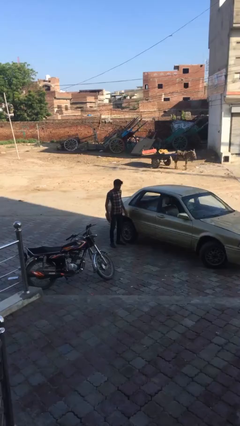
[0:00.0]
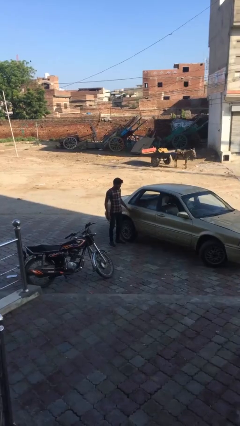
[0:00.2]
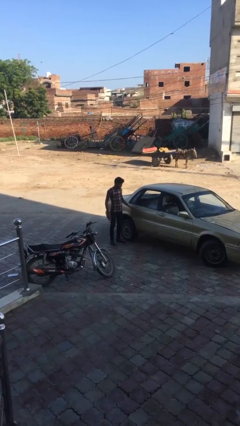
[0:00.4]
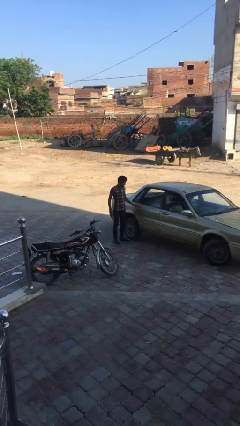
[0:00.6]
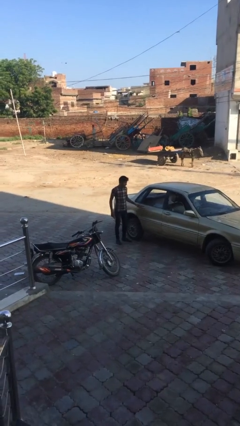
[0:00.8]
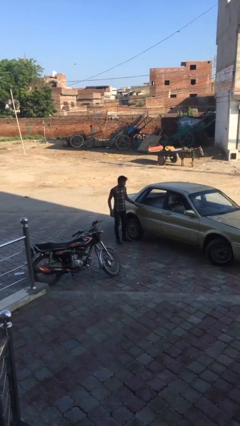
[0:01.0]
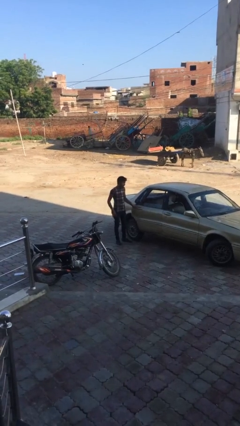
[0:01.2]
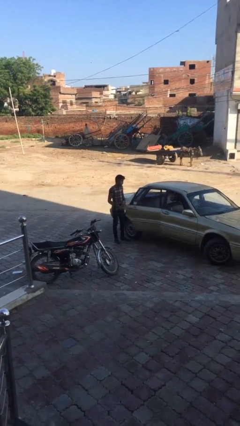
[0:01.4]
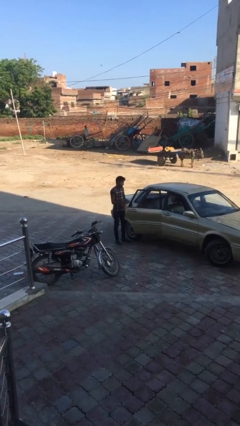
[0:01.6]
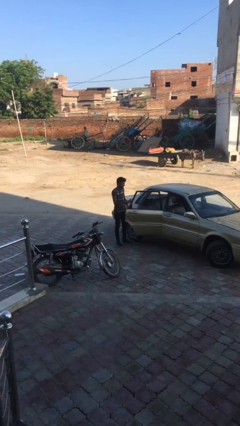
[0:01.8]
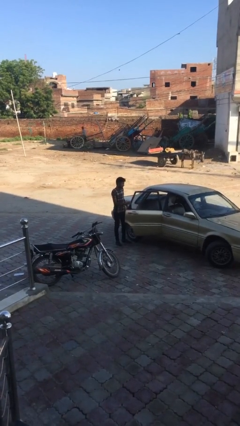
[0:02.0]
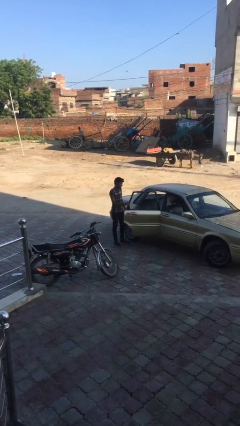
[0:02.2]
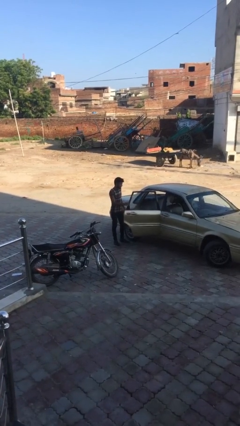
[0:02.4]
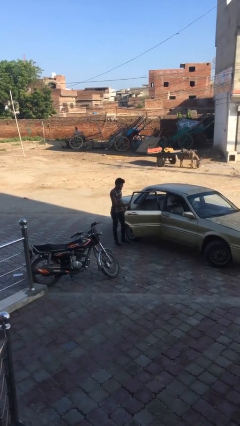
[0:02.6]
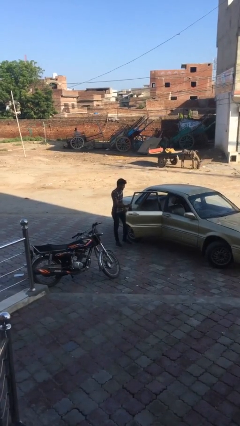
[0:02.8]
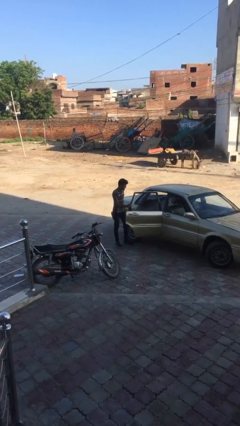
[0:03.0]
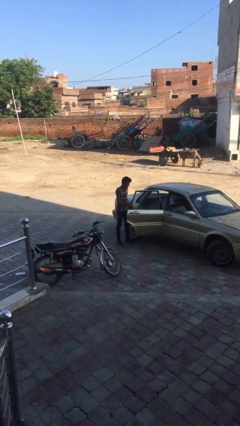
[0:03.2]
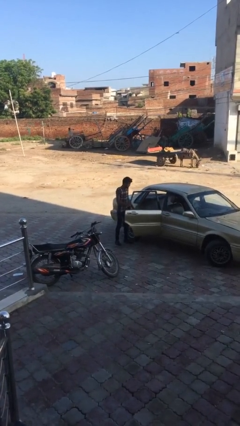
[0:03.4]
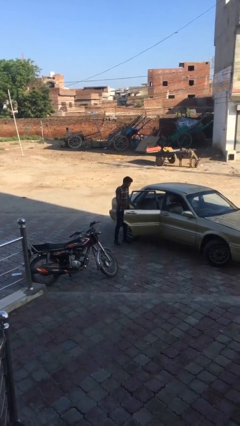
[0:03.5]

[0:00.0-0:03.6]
person opens car door

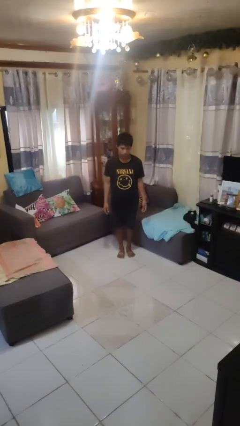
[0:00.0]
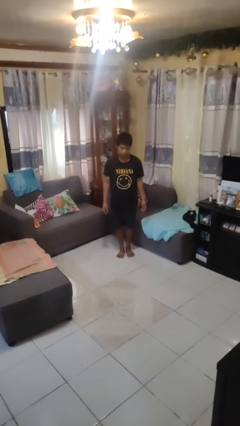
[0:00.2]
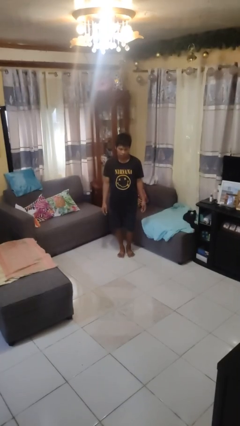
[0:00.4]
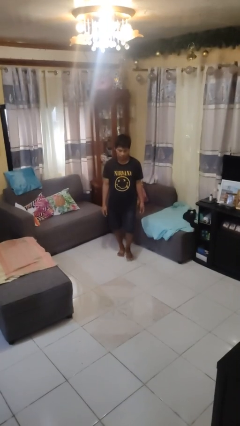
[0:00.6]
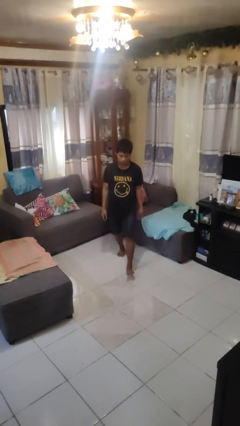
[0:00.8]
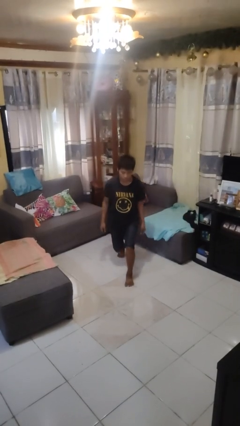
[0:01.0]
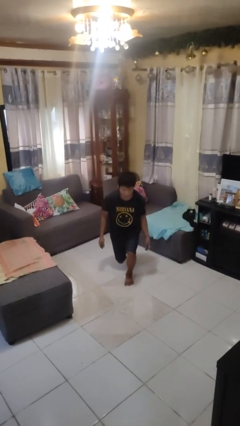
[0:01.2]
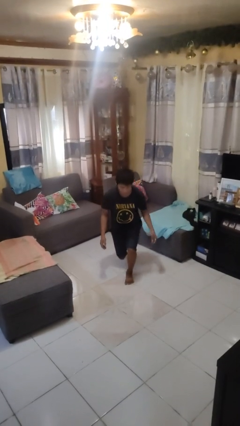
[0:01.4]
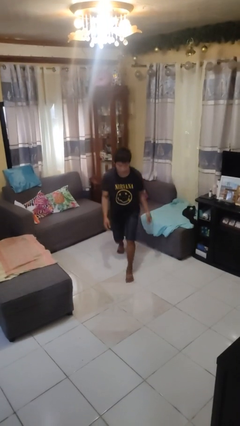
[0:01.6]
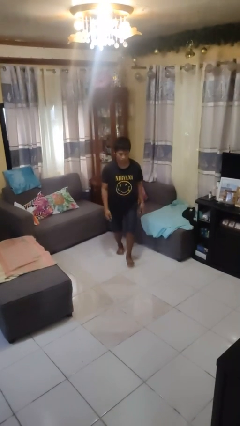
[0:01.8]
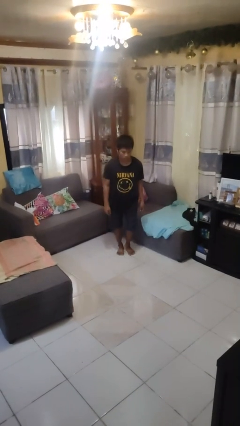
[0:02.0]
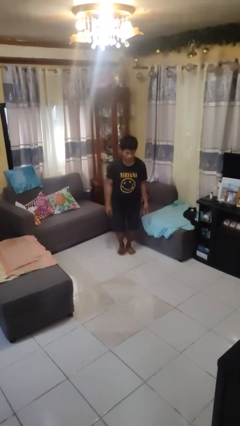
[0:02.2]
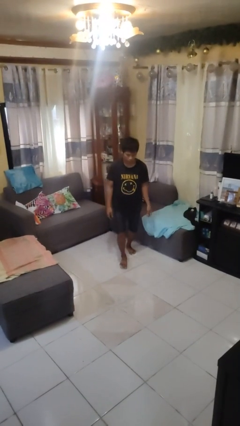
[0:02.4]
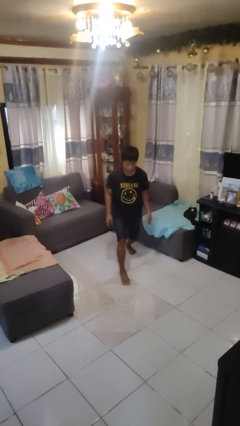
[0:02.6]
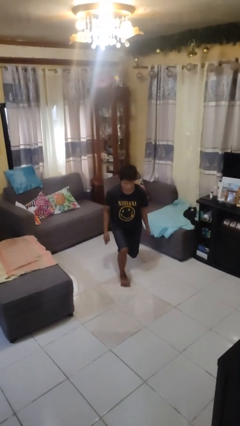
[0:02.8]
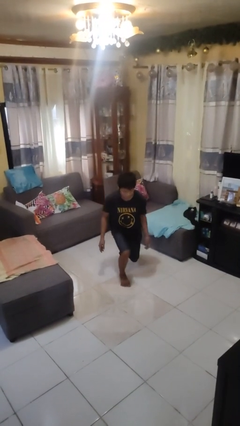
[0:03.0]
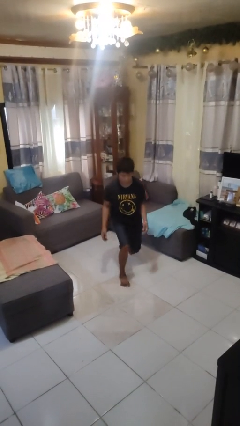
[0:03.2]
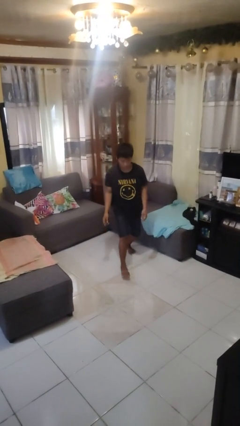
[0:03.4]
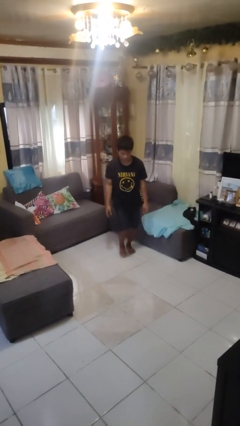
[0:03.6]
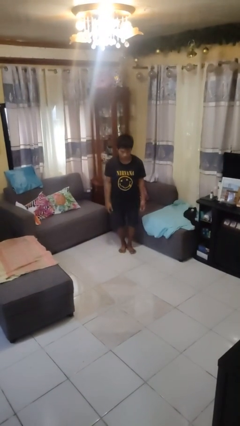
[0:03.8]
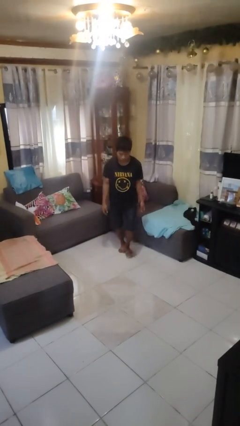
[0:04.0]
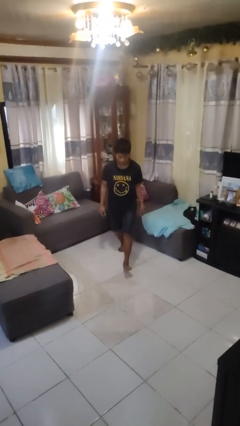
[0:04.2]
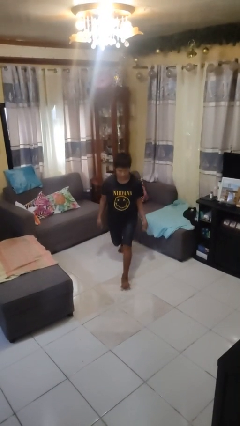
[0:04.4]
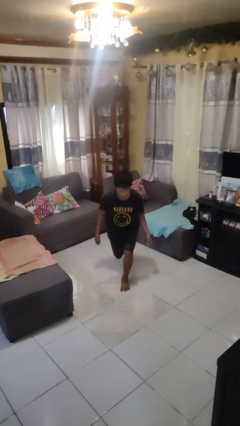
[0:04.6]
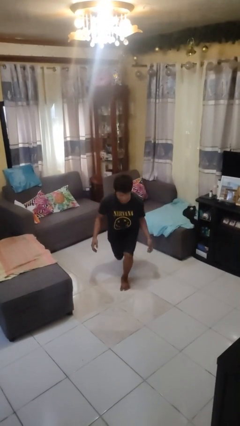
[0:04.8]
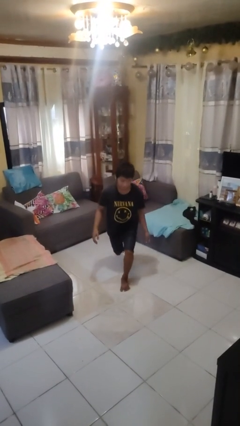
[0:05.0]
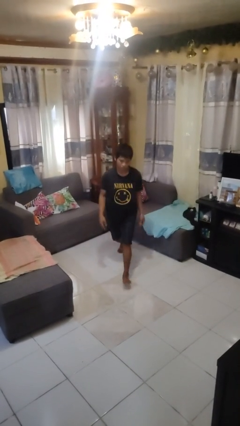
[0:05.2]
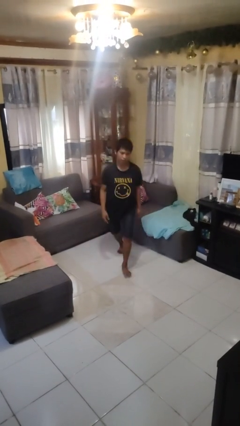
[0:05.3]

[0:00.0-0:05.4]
person exercises with lunges

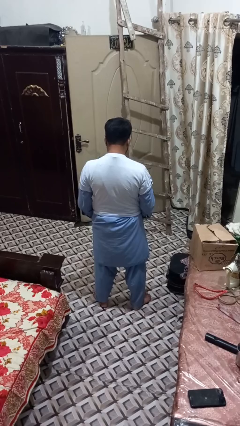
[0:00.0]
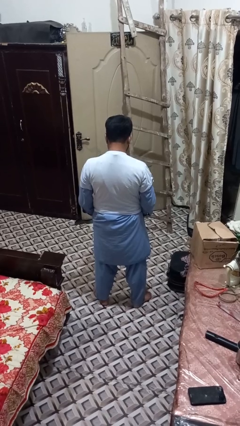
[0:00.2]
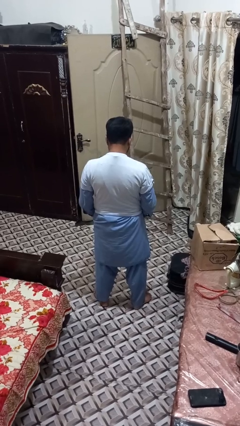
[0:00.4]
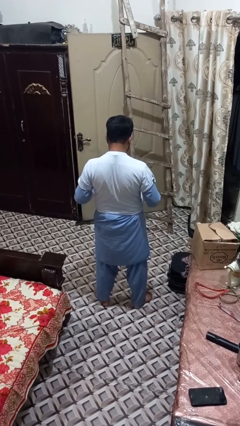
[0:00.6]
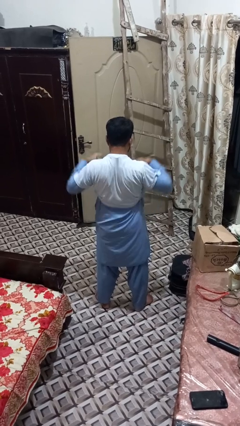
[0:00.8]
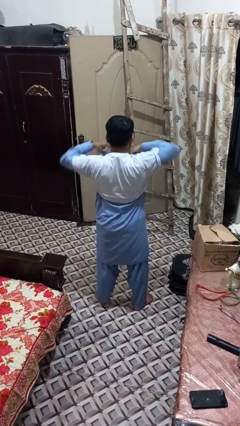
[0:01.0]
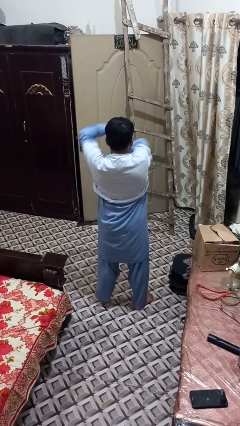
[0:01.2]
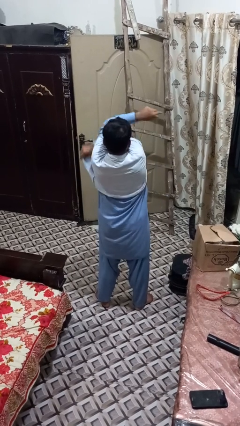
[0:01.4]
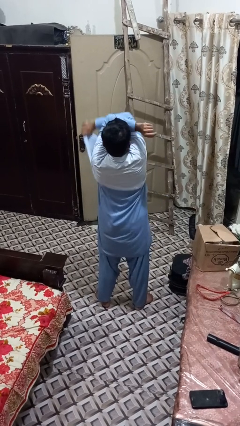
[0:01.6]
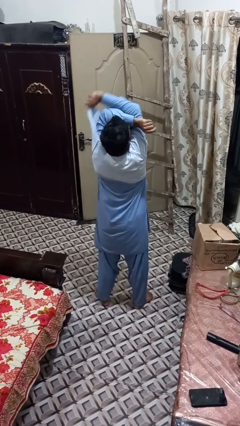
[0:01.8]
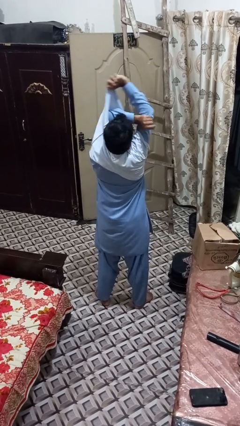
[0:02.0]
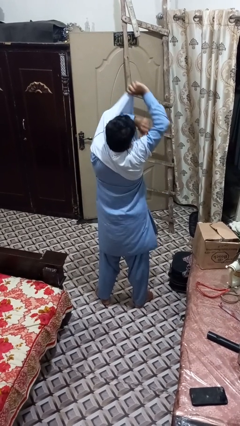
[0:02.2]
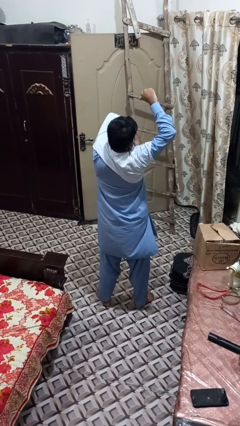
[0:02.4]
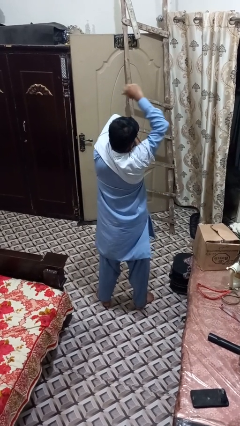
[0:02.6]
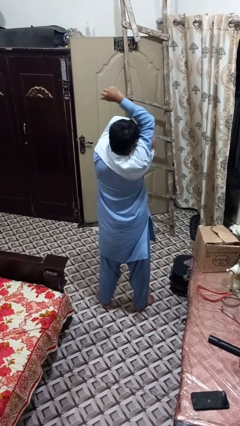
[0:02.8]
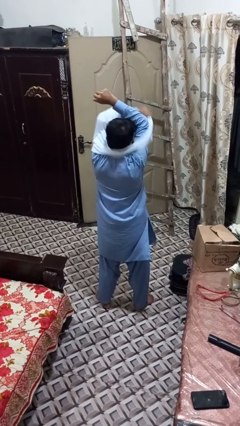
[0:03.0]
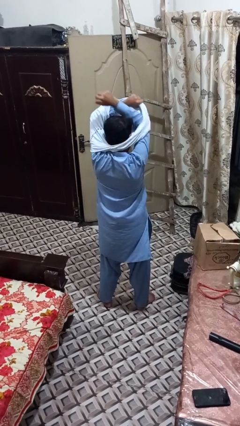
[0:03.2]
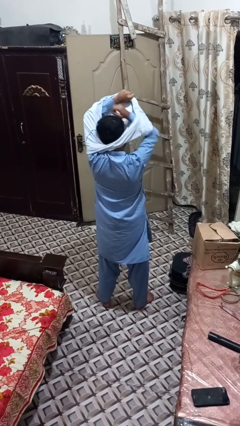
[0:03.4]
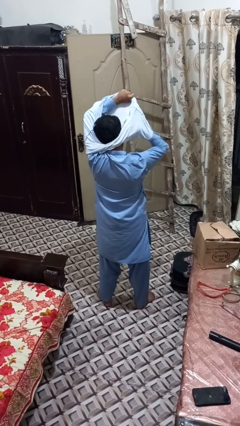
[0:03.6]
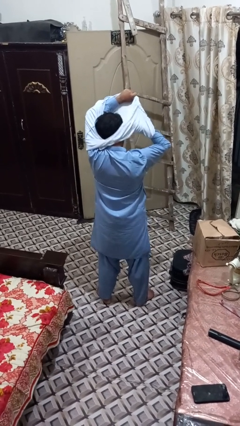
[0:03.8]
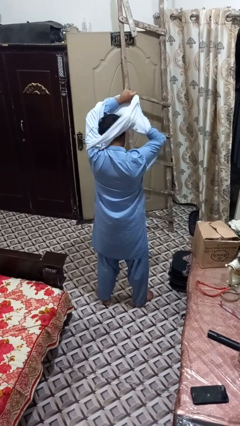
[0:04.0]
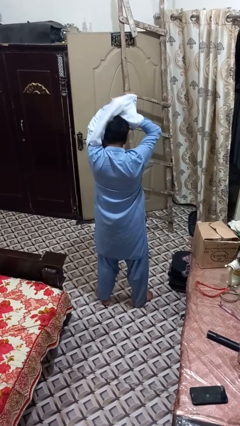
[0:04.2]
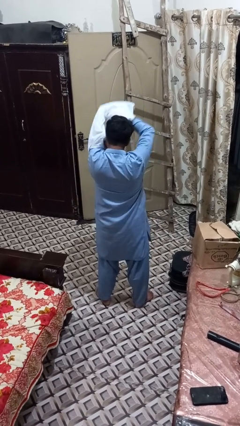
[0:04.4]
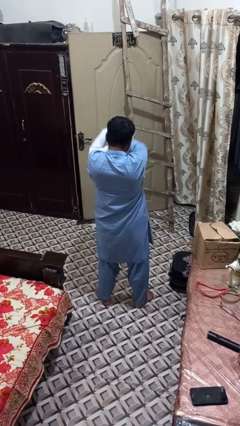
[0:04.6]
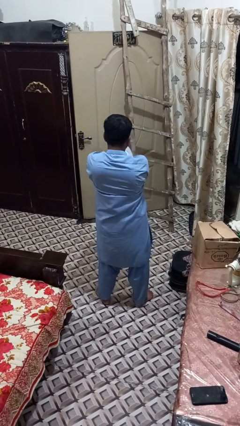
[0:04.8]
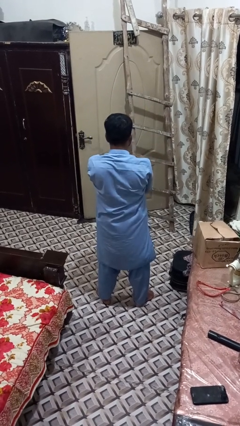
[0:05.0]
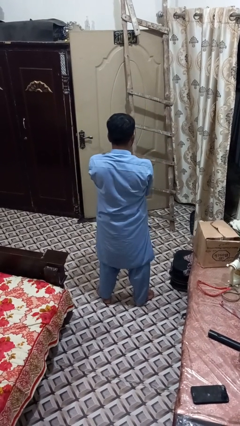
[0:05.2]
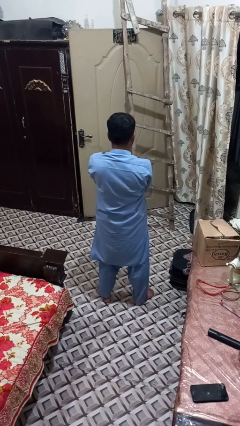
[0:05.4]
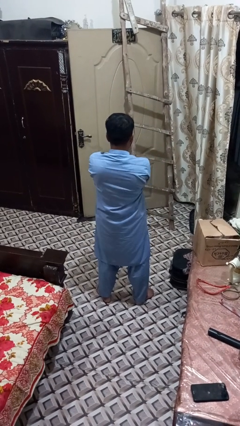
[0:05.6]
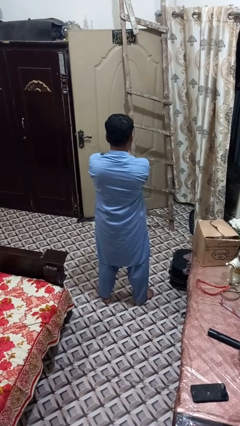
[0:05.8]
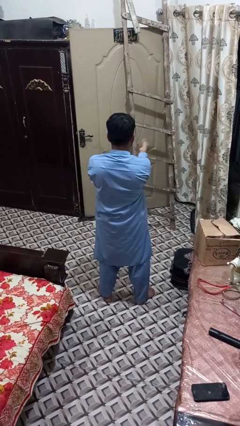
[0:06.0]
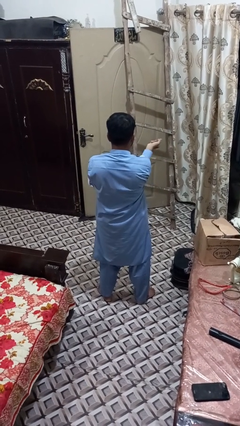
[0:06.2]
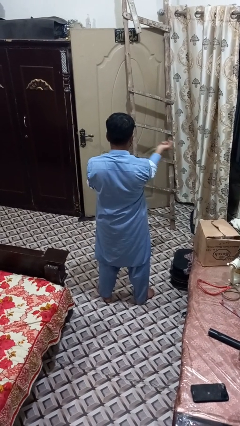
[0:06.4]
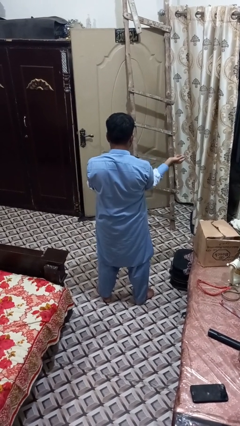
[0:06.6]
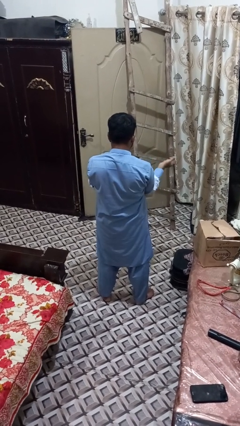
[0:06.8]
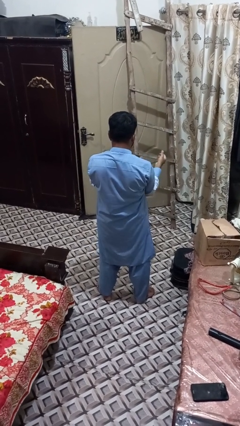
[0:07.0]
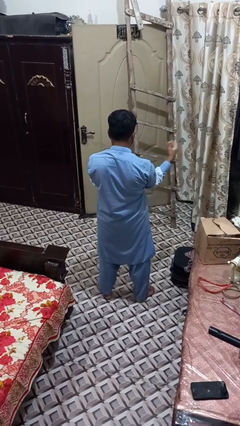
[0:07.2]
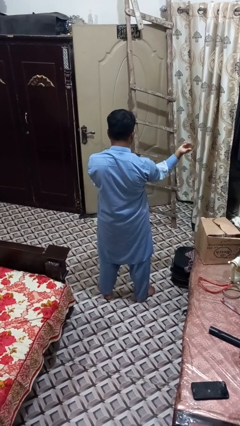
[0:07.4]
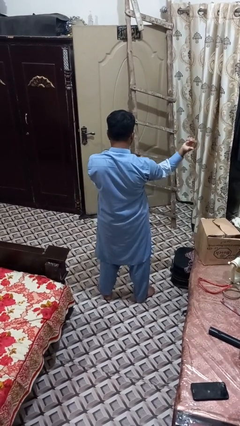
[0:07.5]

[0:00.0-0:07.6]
person takes off shirt

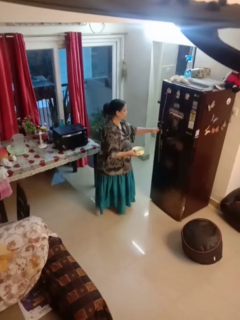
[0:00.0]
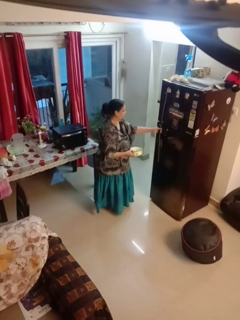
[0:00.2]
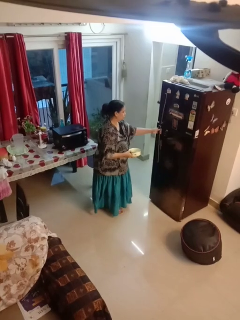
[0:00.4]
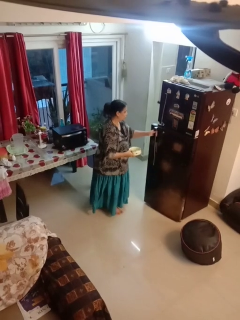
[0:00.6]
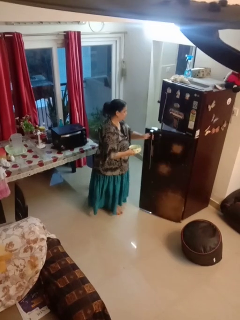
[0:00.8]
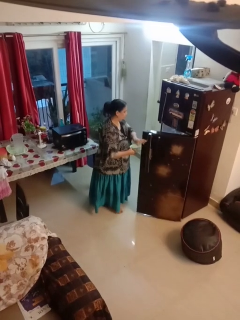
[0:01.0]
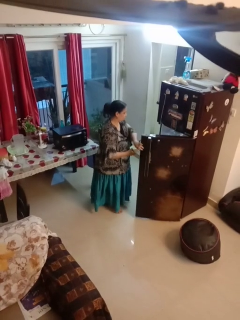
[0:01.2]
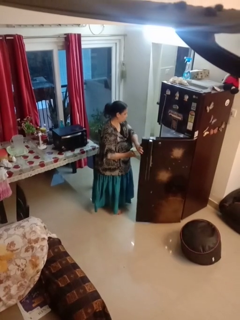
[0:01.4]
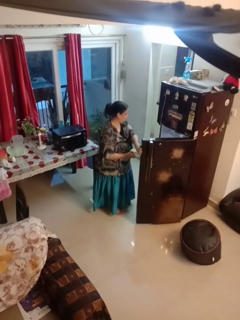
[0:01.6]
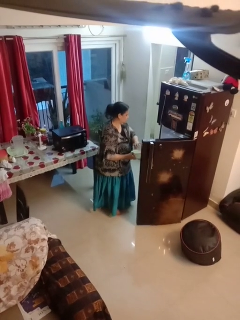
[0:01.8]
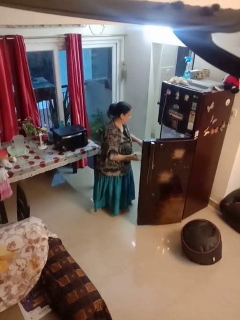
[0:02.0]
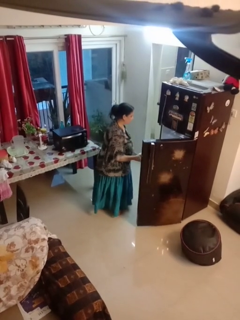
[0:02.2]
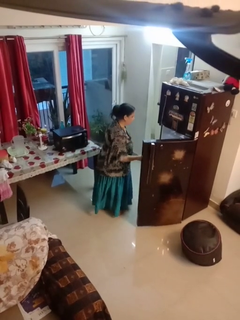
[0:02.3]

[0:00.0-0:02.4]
person opens refrigerator
